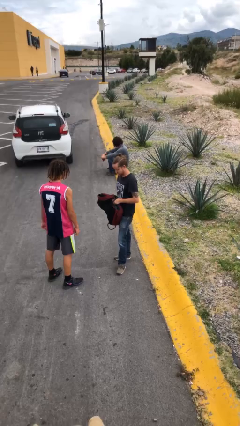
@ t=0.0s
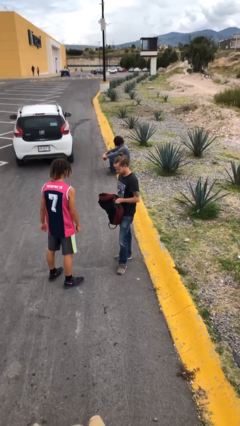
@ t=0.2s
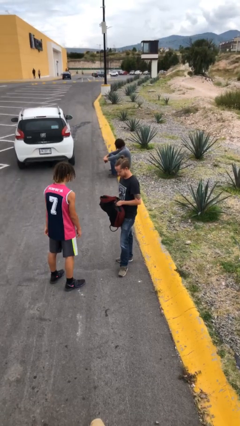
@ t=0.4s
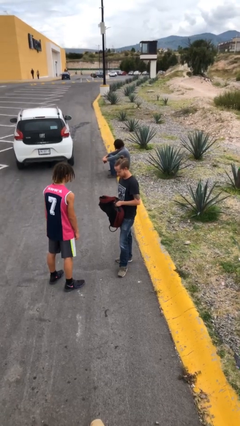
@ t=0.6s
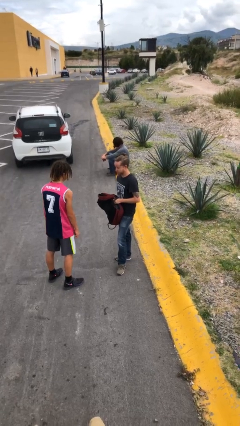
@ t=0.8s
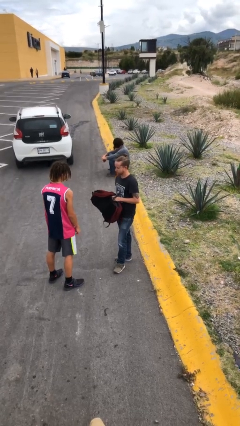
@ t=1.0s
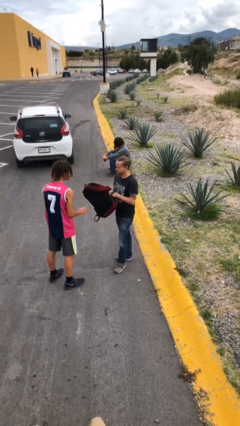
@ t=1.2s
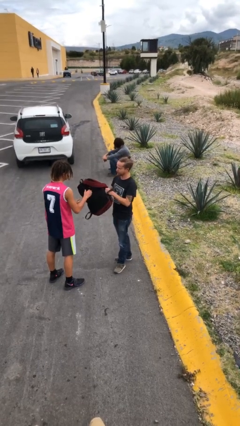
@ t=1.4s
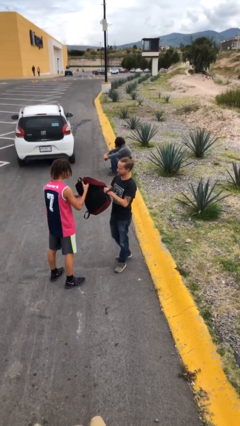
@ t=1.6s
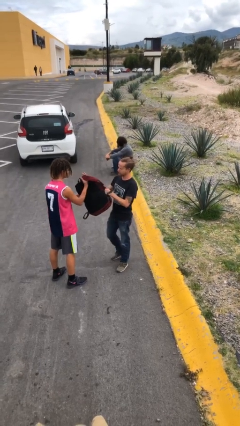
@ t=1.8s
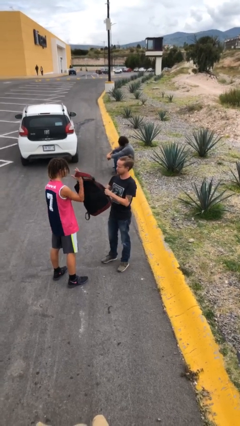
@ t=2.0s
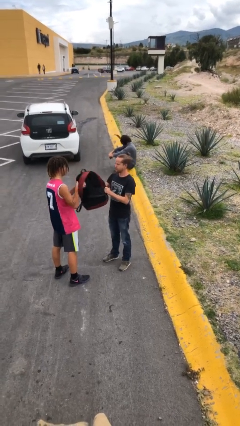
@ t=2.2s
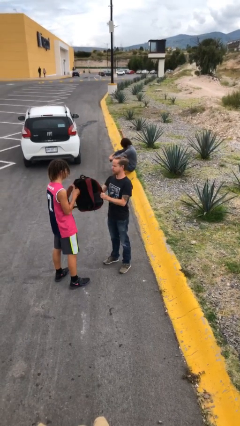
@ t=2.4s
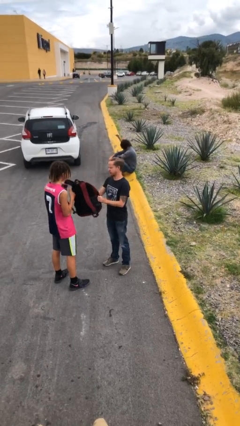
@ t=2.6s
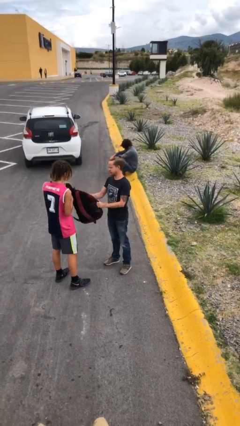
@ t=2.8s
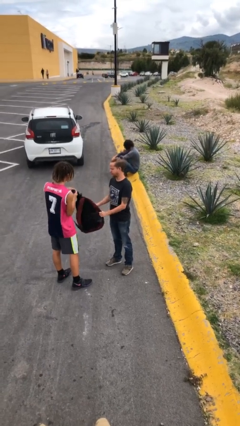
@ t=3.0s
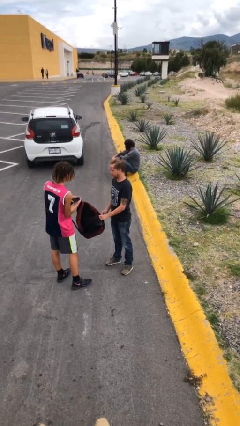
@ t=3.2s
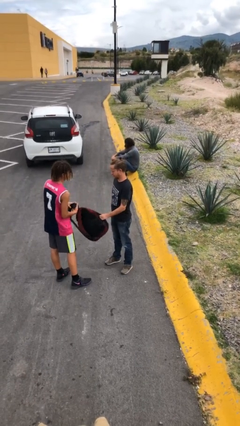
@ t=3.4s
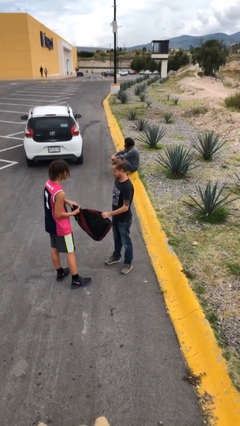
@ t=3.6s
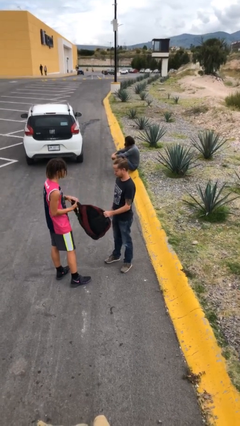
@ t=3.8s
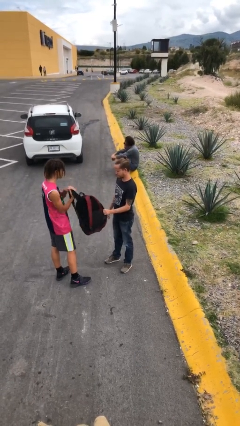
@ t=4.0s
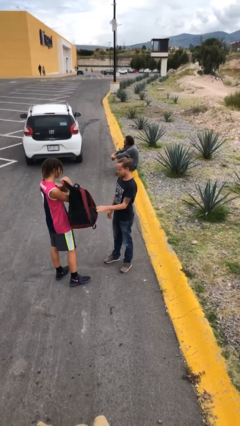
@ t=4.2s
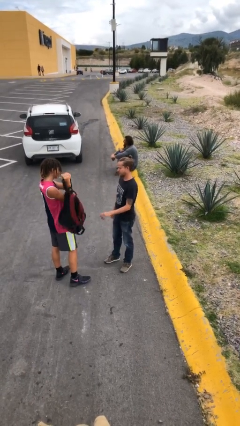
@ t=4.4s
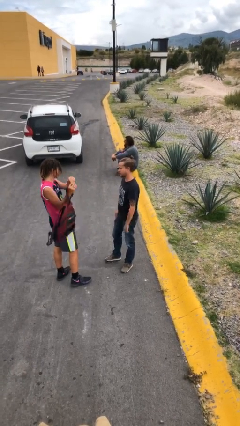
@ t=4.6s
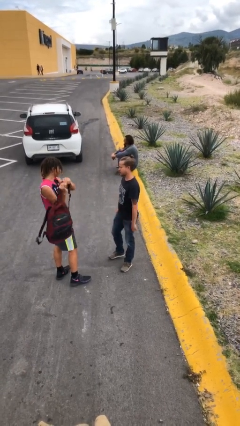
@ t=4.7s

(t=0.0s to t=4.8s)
person transfers object to person

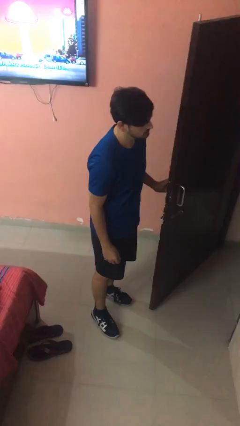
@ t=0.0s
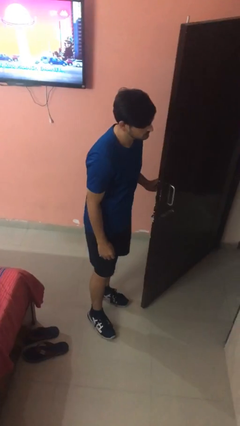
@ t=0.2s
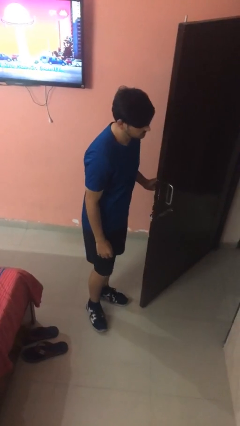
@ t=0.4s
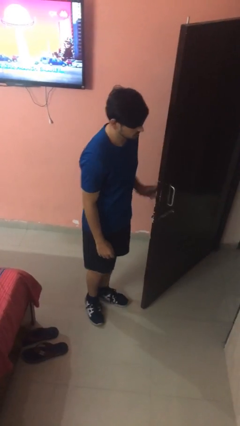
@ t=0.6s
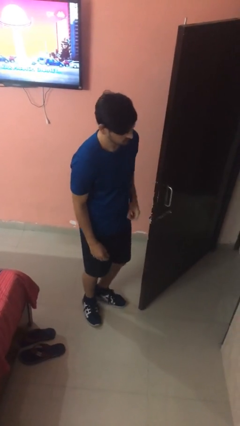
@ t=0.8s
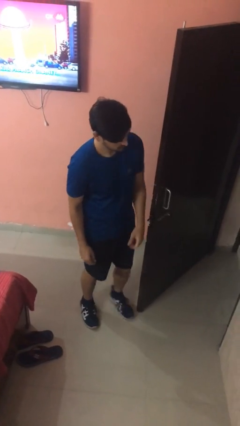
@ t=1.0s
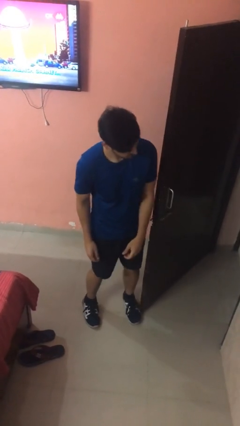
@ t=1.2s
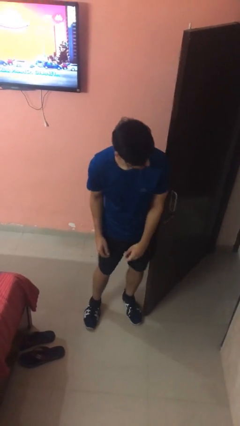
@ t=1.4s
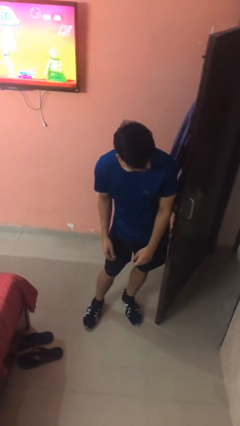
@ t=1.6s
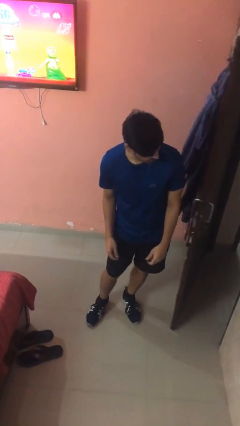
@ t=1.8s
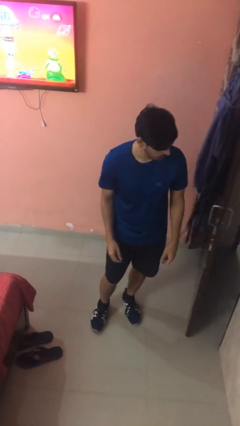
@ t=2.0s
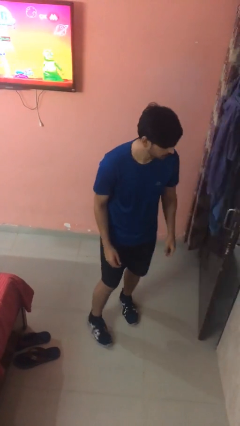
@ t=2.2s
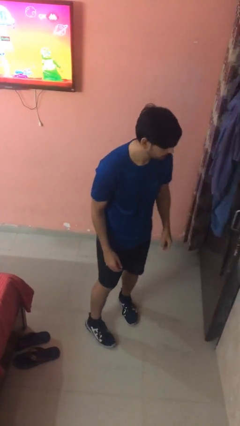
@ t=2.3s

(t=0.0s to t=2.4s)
person closes door with hip

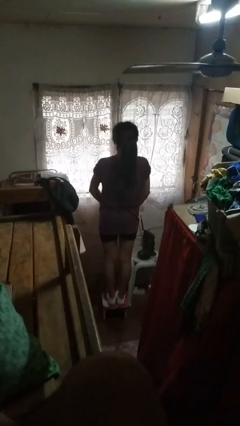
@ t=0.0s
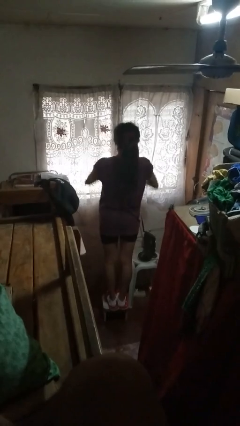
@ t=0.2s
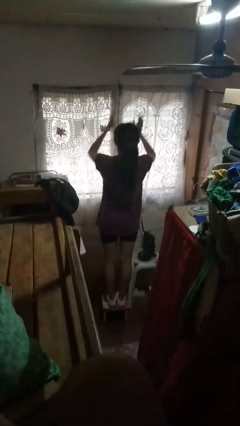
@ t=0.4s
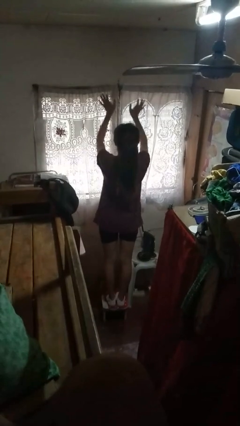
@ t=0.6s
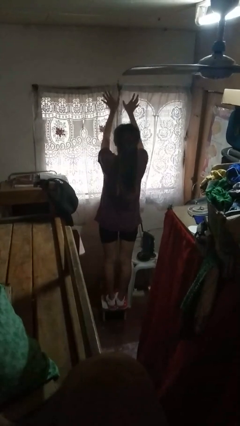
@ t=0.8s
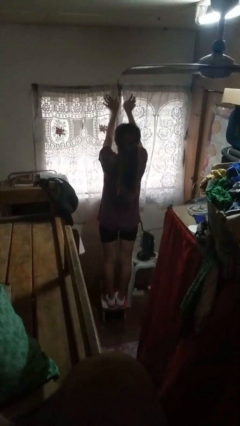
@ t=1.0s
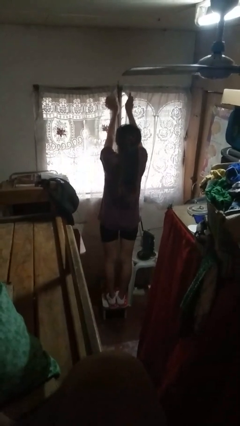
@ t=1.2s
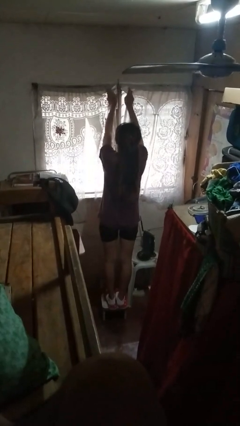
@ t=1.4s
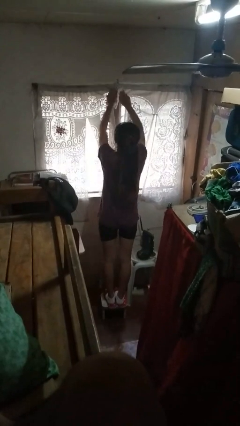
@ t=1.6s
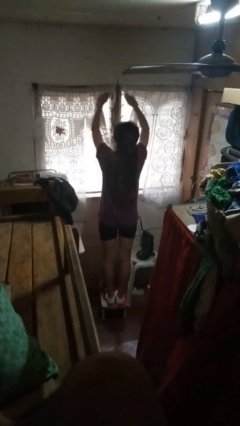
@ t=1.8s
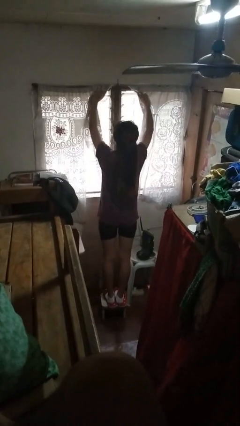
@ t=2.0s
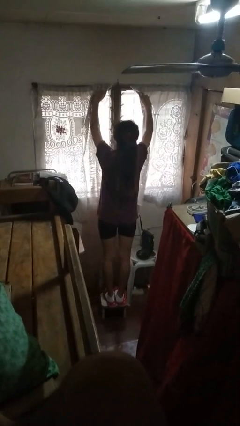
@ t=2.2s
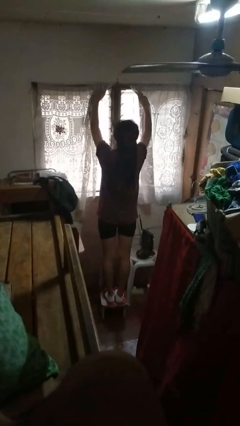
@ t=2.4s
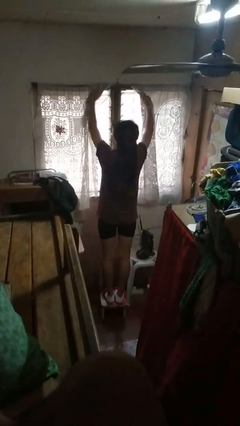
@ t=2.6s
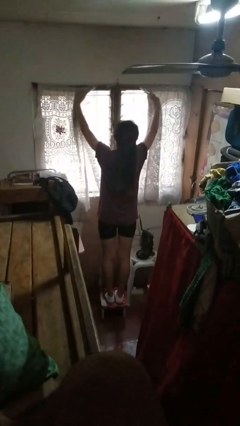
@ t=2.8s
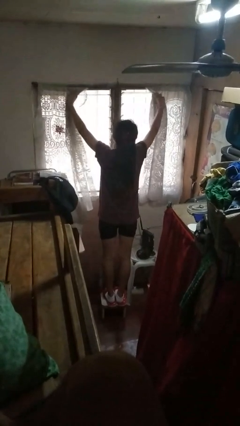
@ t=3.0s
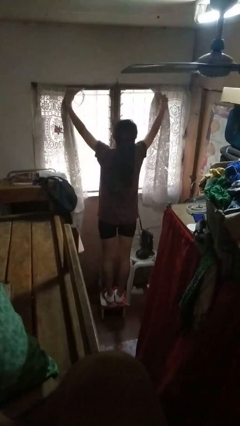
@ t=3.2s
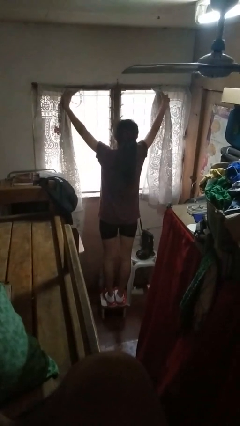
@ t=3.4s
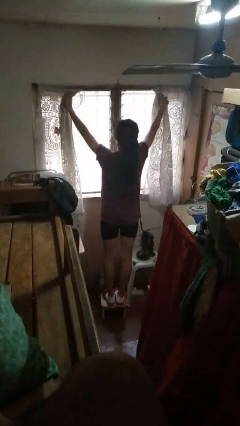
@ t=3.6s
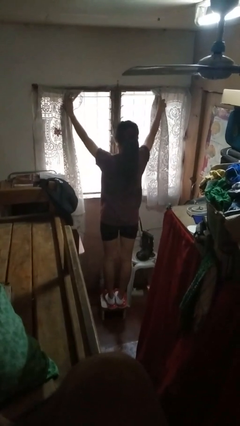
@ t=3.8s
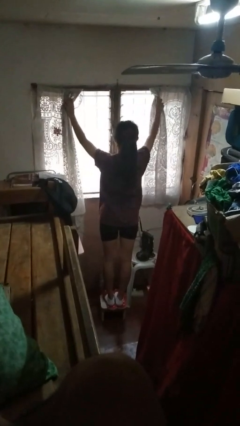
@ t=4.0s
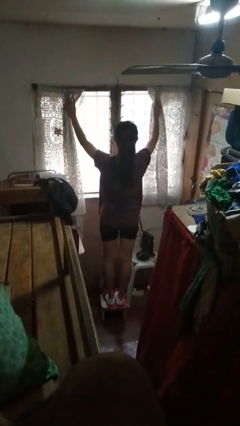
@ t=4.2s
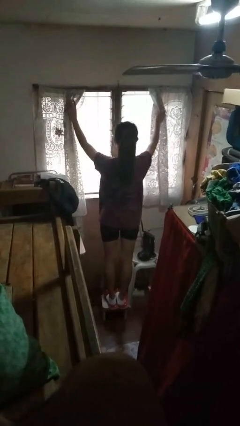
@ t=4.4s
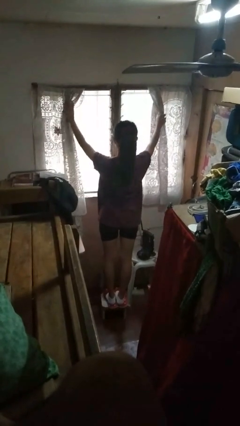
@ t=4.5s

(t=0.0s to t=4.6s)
person opens curtains

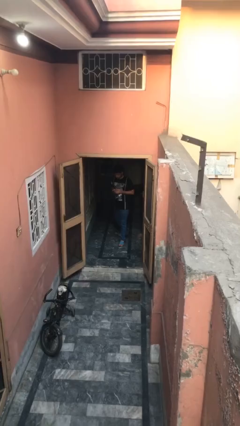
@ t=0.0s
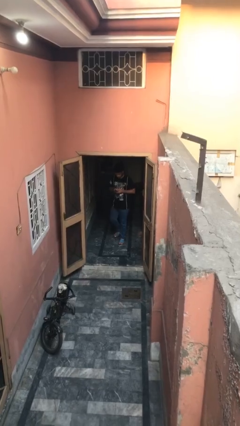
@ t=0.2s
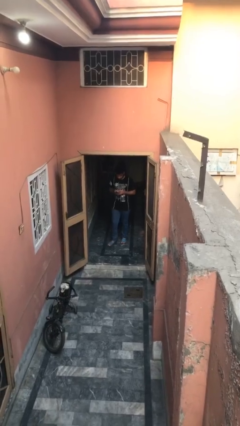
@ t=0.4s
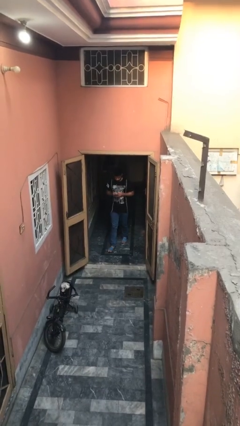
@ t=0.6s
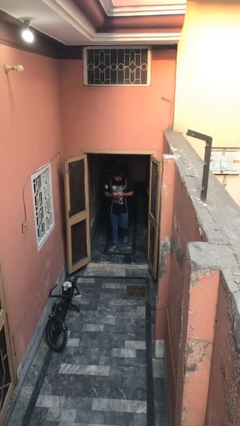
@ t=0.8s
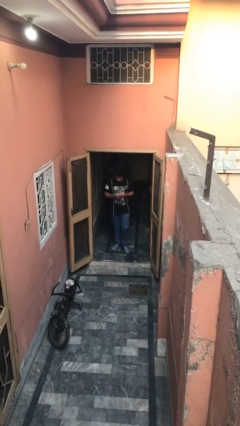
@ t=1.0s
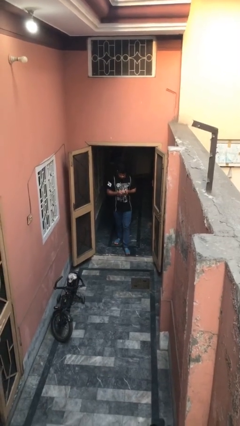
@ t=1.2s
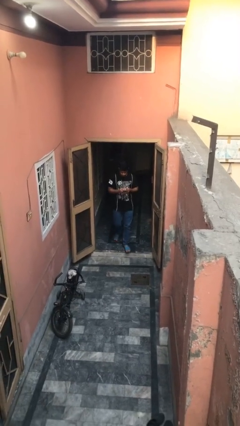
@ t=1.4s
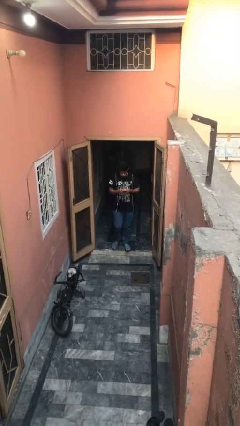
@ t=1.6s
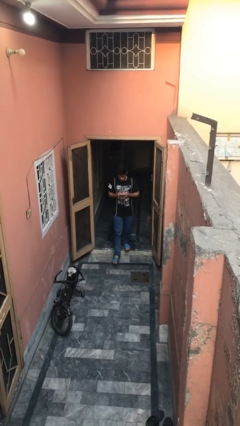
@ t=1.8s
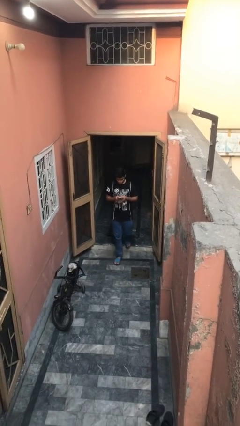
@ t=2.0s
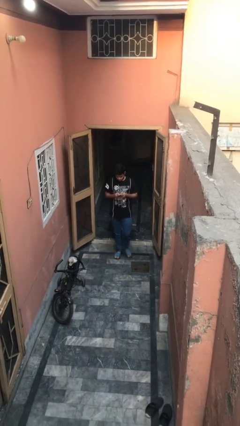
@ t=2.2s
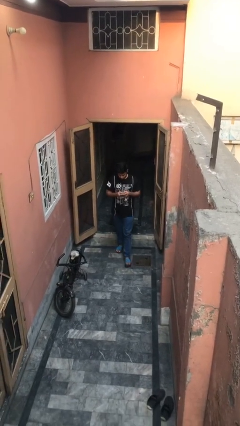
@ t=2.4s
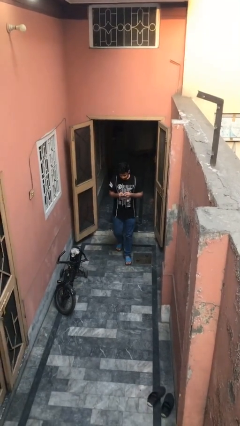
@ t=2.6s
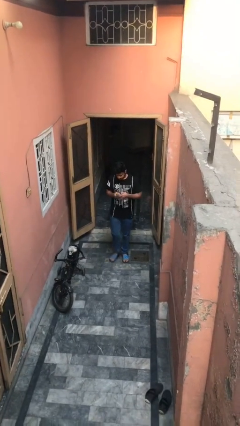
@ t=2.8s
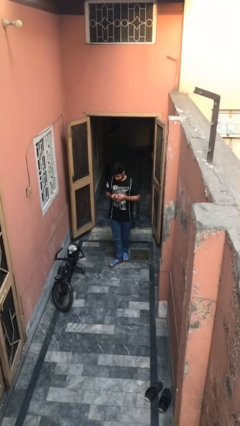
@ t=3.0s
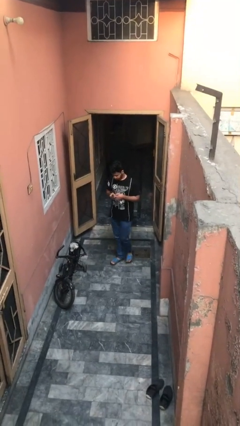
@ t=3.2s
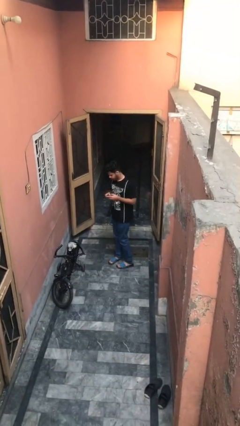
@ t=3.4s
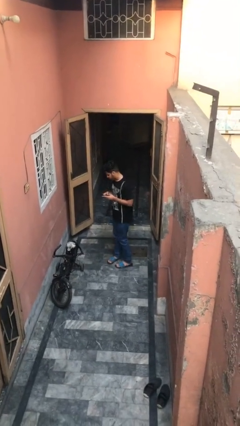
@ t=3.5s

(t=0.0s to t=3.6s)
person enters scene through structure

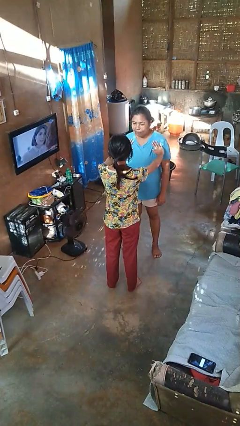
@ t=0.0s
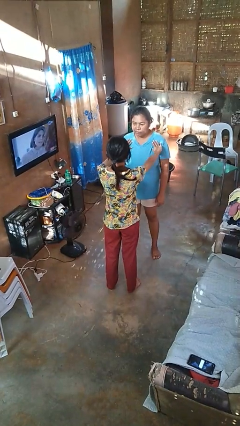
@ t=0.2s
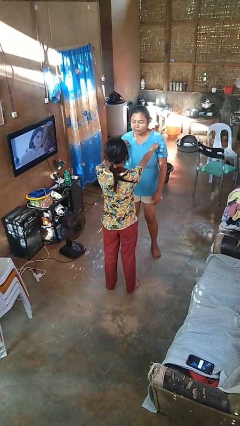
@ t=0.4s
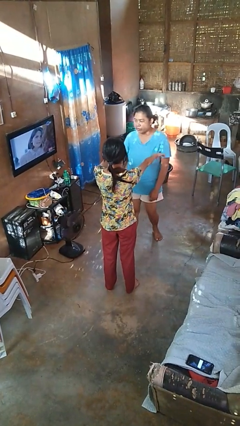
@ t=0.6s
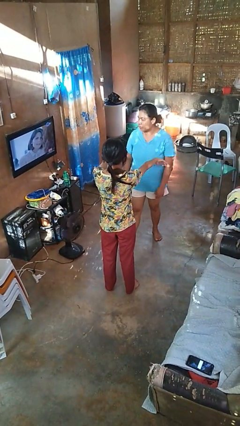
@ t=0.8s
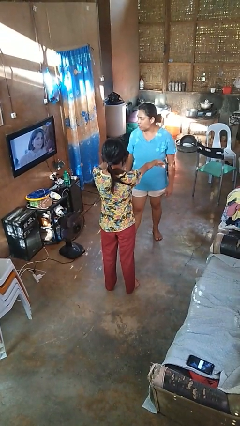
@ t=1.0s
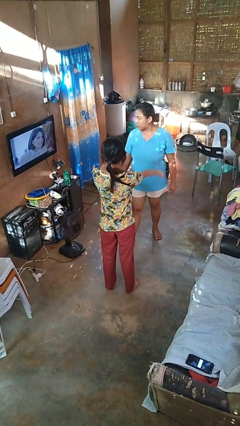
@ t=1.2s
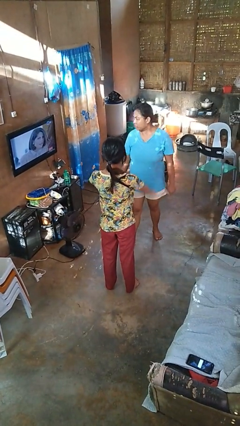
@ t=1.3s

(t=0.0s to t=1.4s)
person shoves person

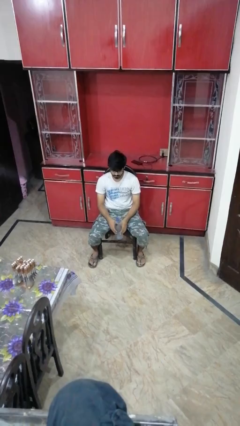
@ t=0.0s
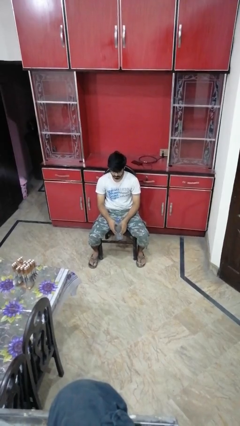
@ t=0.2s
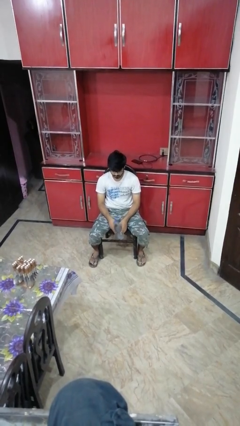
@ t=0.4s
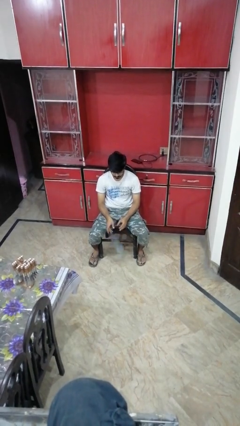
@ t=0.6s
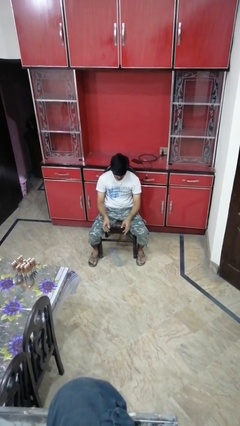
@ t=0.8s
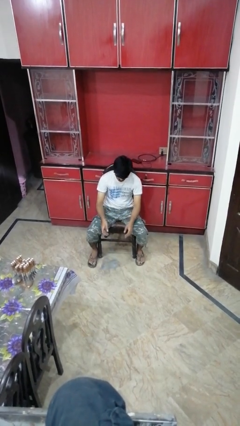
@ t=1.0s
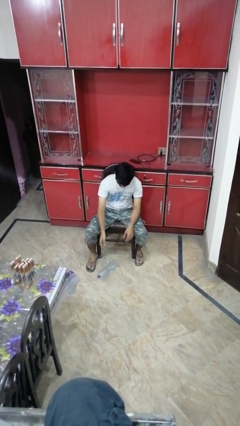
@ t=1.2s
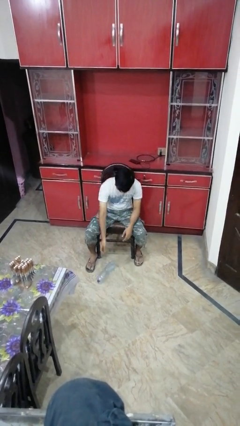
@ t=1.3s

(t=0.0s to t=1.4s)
person drops object
